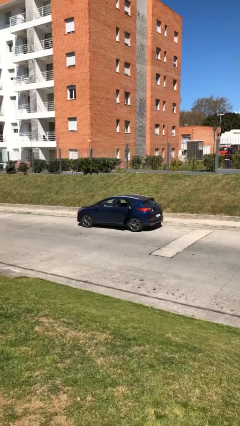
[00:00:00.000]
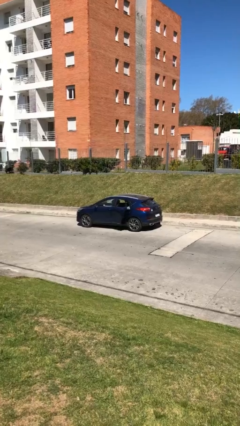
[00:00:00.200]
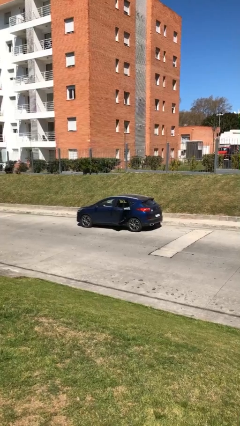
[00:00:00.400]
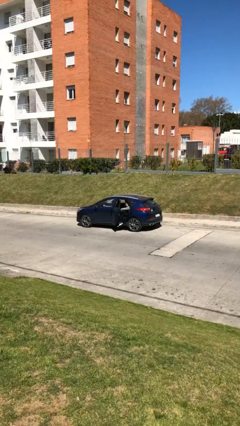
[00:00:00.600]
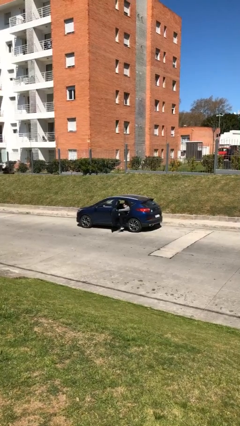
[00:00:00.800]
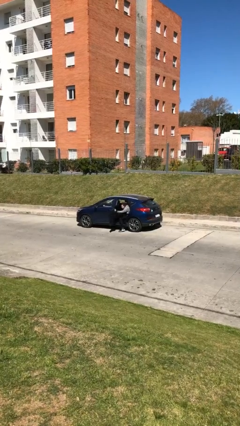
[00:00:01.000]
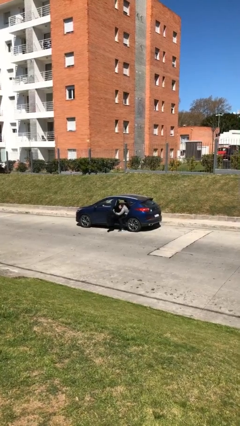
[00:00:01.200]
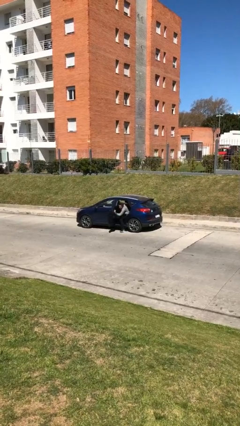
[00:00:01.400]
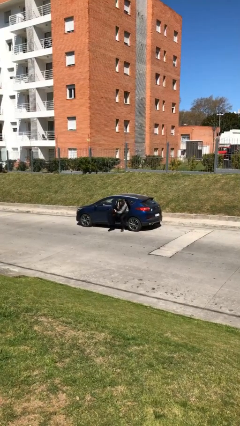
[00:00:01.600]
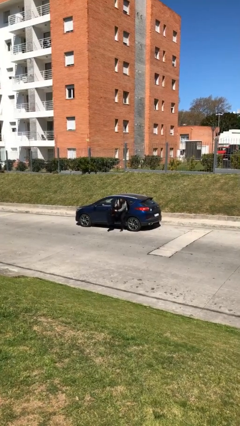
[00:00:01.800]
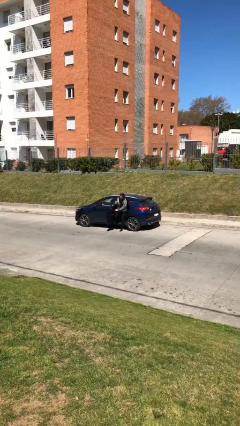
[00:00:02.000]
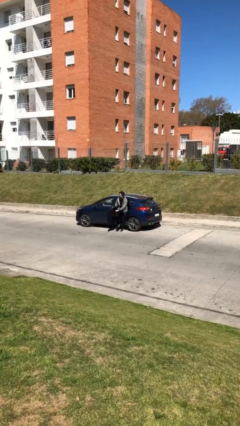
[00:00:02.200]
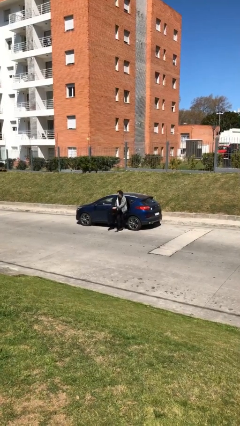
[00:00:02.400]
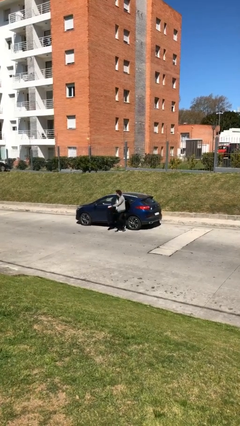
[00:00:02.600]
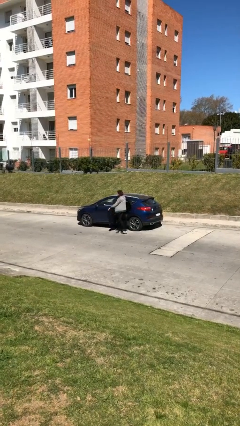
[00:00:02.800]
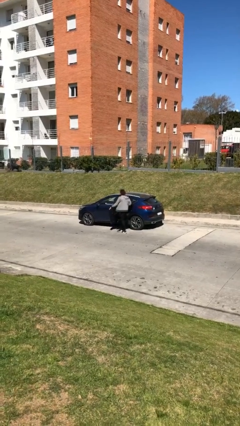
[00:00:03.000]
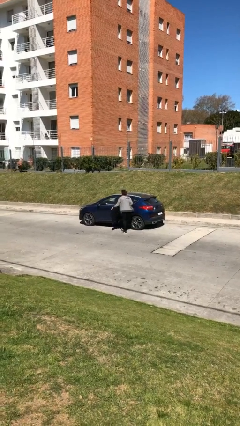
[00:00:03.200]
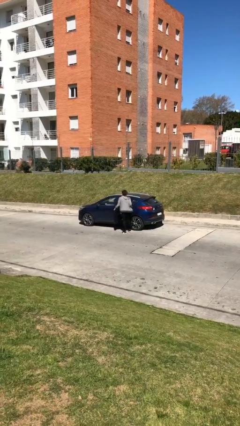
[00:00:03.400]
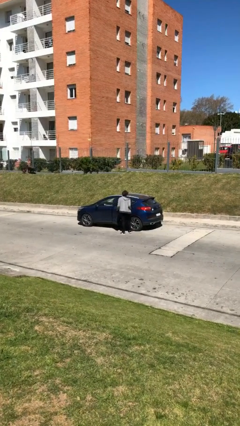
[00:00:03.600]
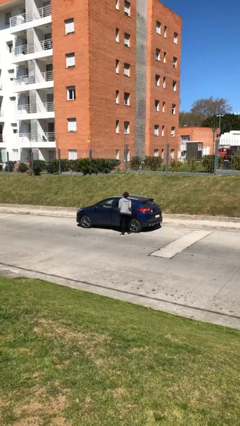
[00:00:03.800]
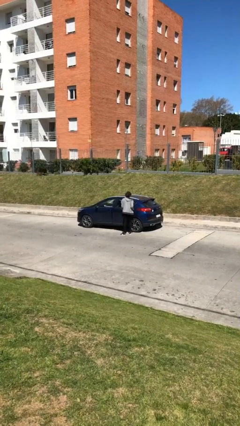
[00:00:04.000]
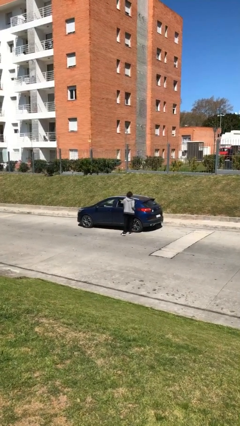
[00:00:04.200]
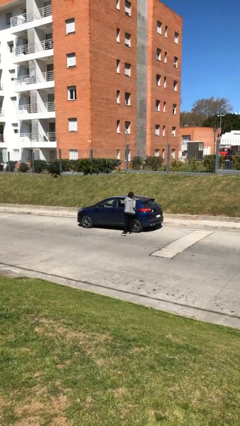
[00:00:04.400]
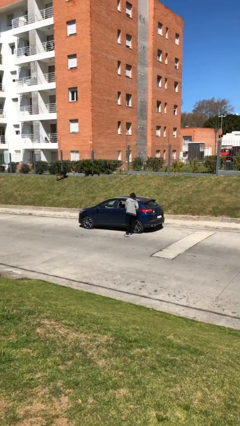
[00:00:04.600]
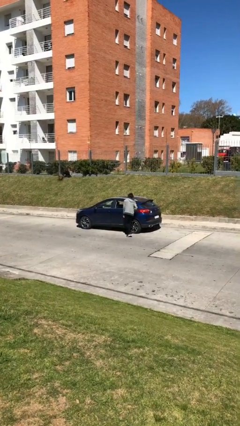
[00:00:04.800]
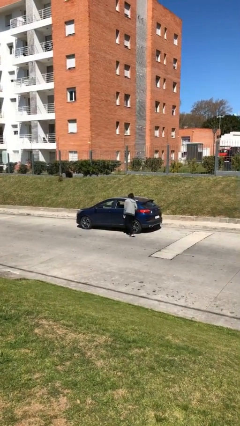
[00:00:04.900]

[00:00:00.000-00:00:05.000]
car drops off person

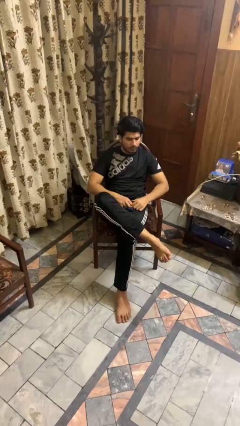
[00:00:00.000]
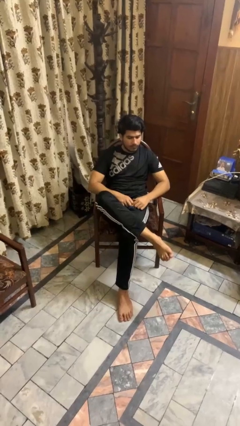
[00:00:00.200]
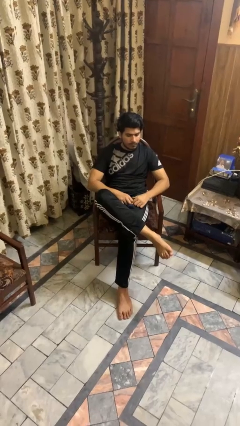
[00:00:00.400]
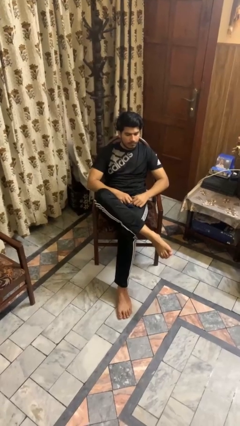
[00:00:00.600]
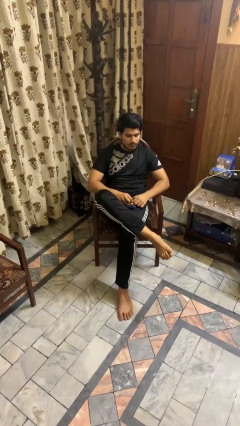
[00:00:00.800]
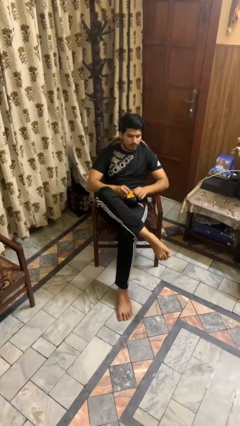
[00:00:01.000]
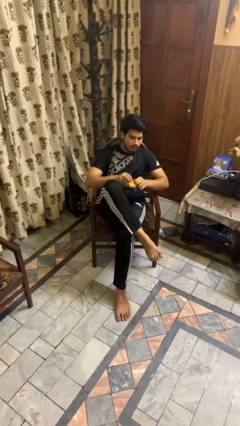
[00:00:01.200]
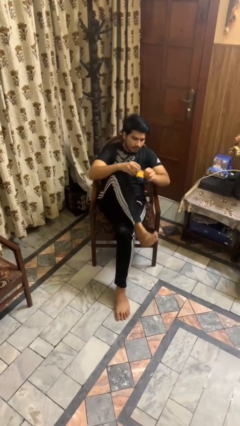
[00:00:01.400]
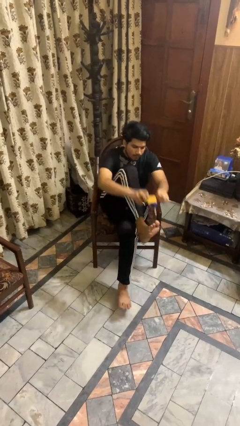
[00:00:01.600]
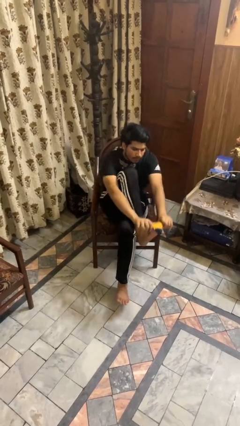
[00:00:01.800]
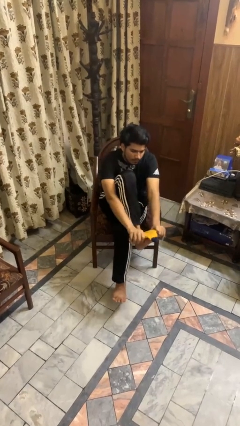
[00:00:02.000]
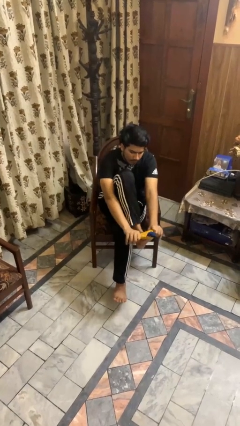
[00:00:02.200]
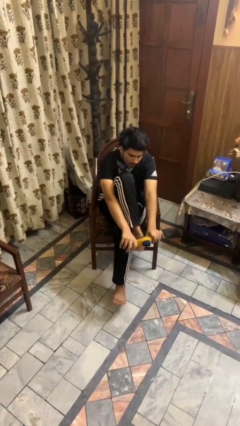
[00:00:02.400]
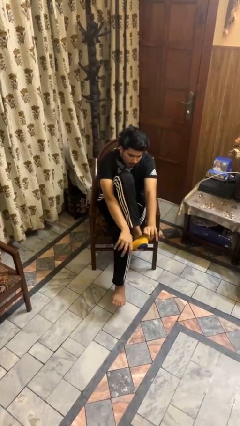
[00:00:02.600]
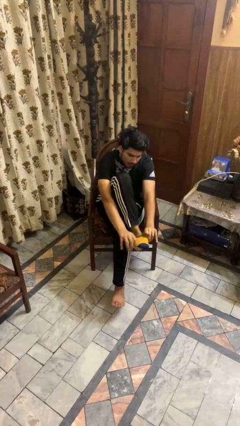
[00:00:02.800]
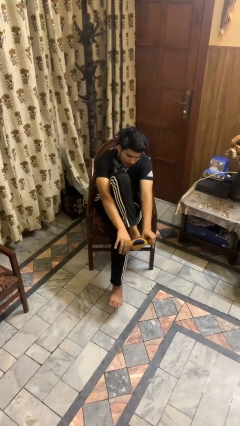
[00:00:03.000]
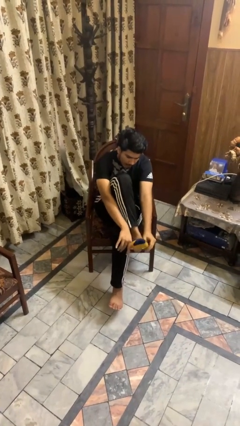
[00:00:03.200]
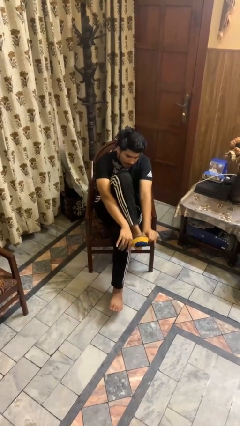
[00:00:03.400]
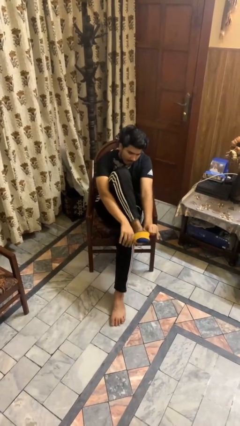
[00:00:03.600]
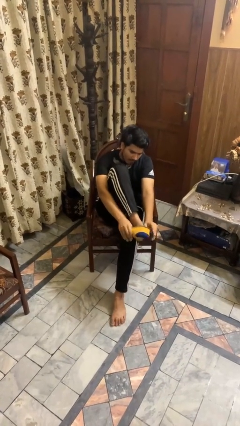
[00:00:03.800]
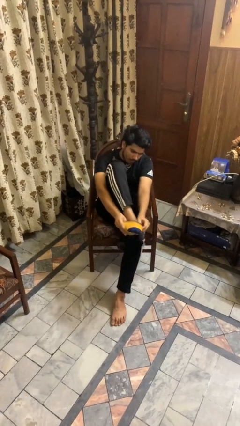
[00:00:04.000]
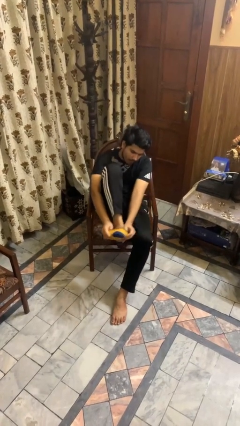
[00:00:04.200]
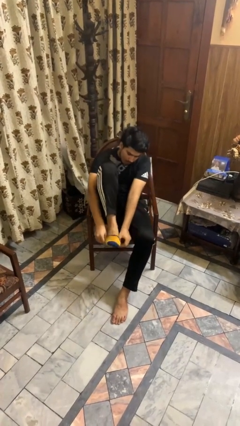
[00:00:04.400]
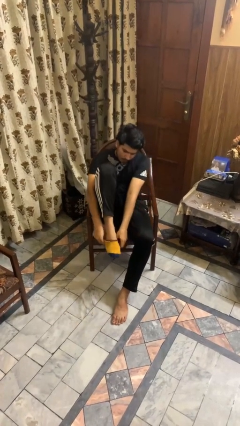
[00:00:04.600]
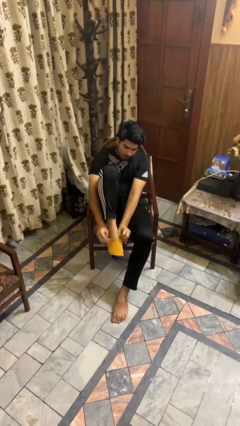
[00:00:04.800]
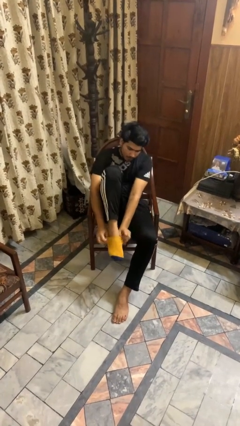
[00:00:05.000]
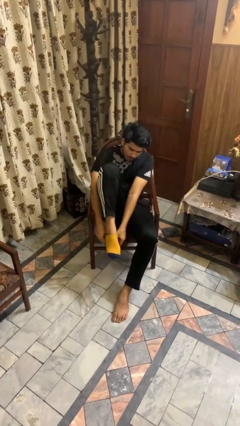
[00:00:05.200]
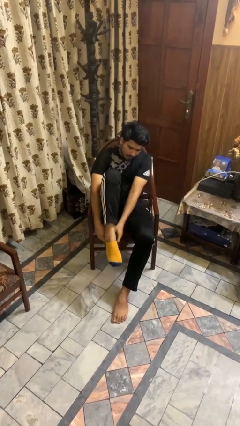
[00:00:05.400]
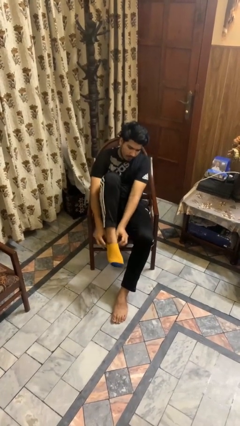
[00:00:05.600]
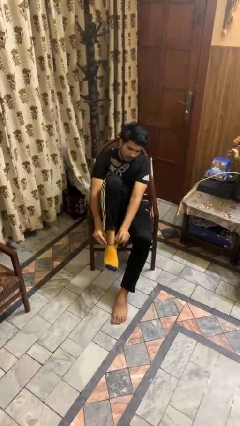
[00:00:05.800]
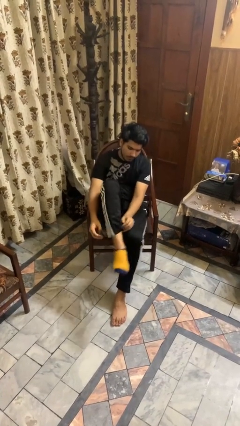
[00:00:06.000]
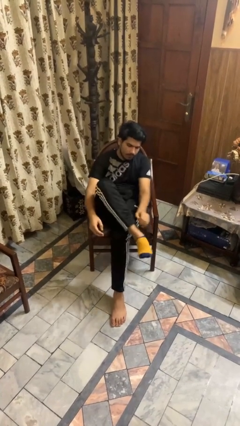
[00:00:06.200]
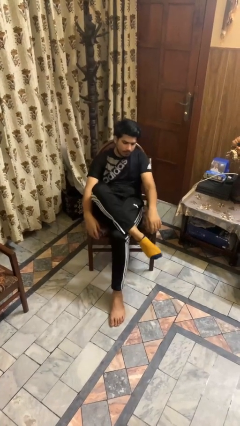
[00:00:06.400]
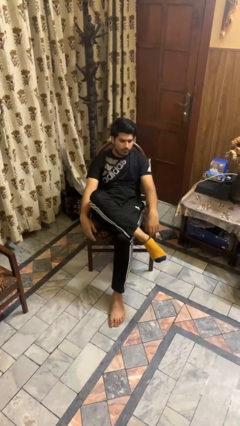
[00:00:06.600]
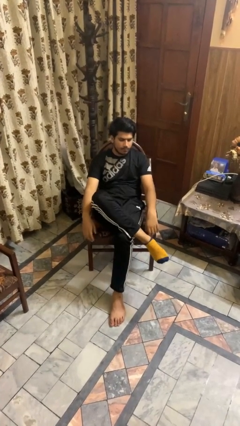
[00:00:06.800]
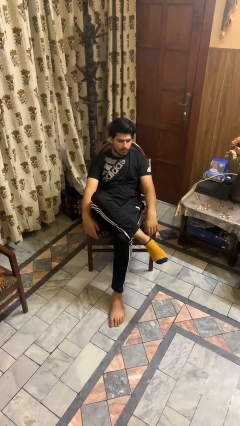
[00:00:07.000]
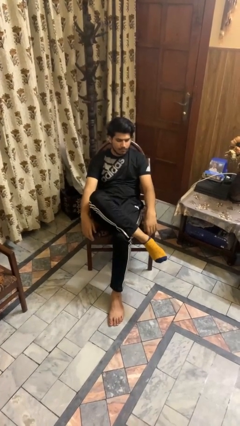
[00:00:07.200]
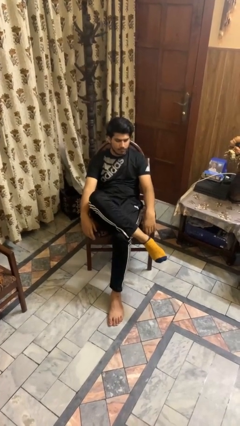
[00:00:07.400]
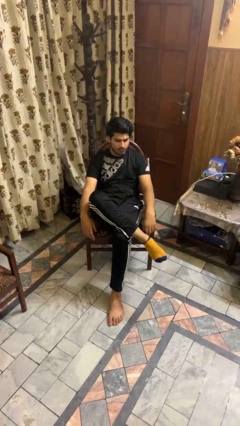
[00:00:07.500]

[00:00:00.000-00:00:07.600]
person puts on socks

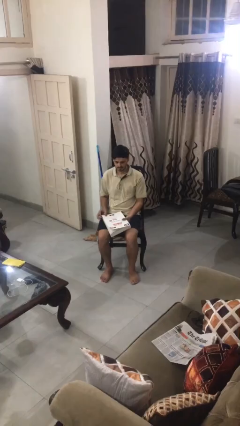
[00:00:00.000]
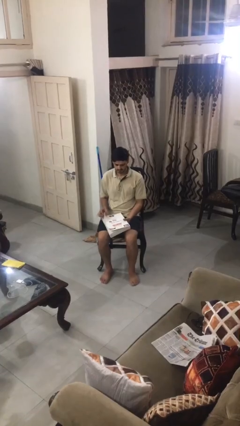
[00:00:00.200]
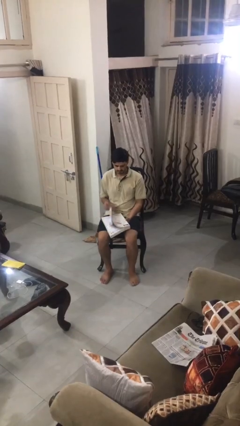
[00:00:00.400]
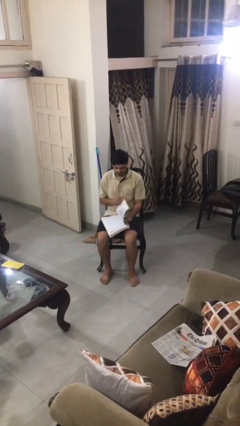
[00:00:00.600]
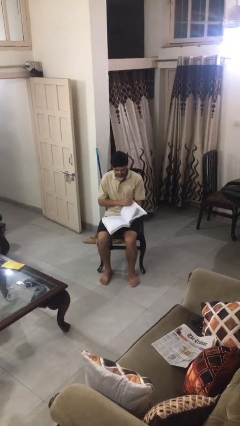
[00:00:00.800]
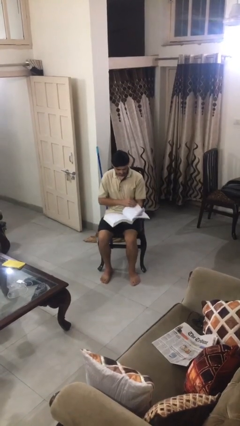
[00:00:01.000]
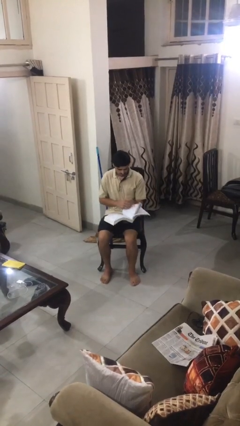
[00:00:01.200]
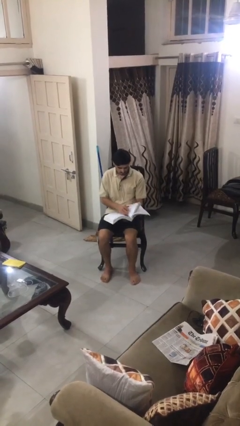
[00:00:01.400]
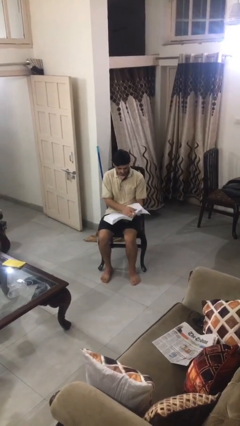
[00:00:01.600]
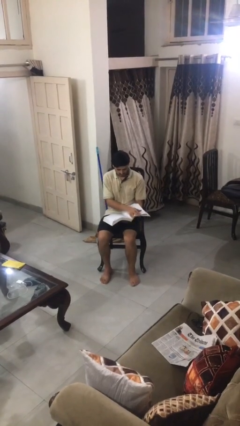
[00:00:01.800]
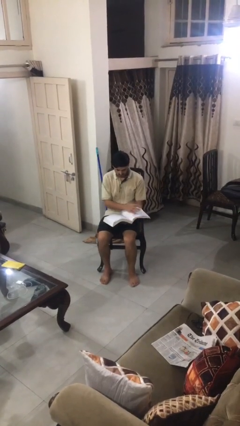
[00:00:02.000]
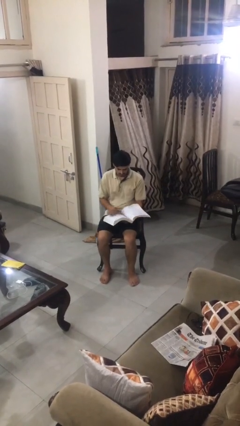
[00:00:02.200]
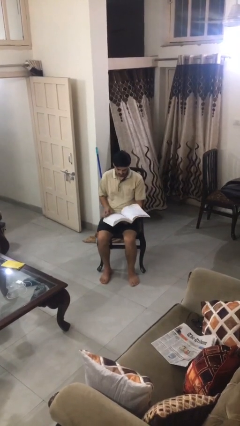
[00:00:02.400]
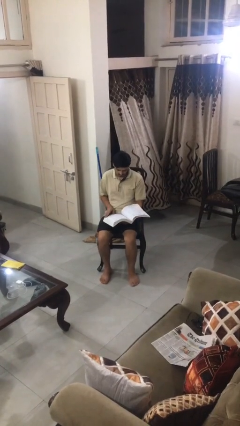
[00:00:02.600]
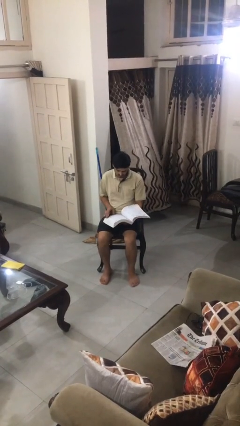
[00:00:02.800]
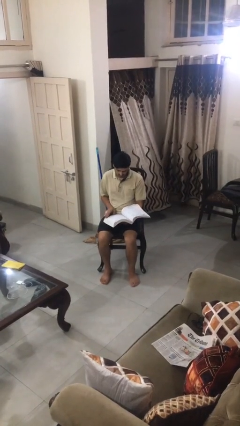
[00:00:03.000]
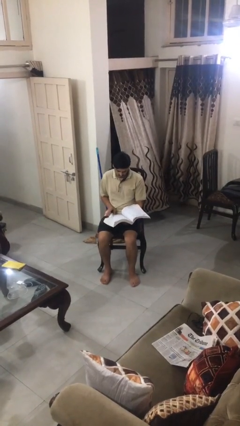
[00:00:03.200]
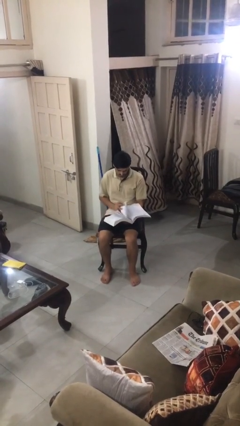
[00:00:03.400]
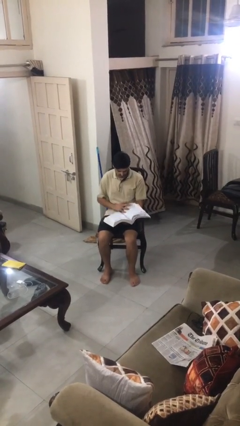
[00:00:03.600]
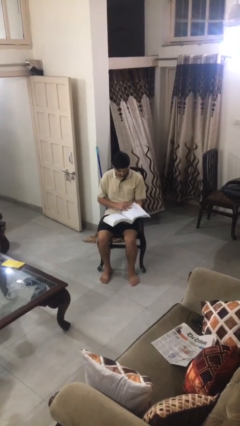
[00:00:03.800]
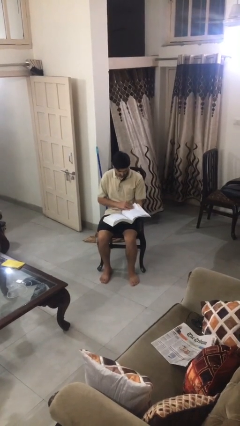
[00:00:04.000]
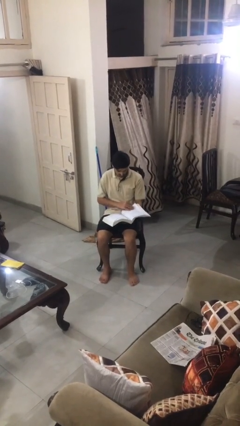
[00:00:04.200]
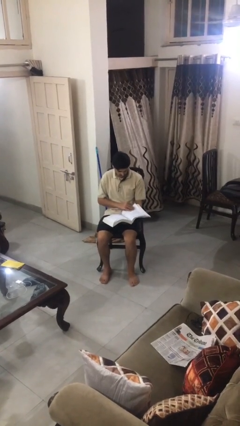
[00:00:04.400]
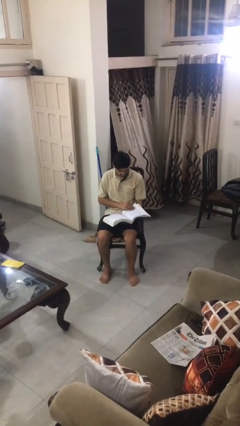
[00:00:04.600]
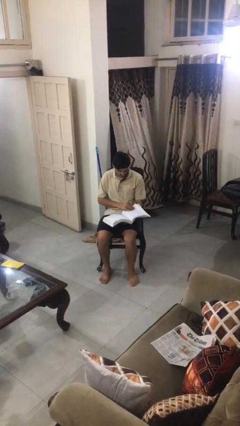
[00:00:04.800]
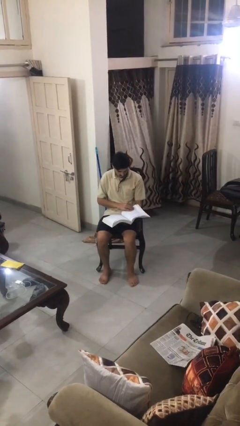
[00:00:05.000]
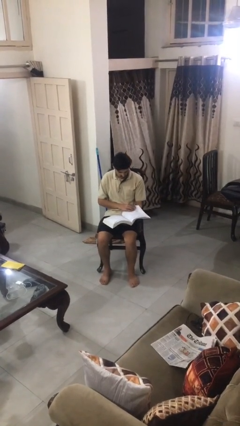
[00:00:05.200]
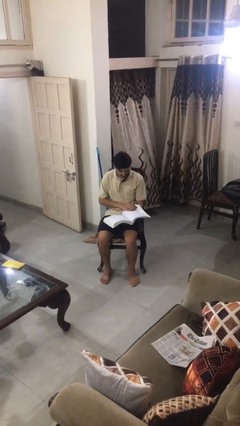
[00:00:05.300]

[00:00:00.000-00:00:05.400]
person reads book

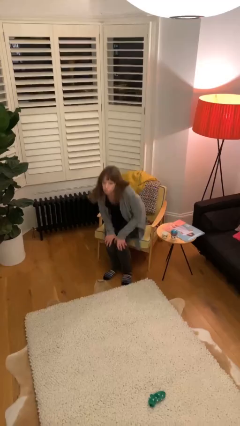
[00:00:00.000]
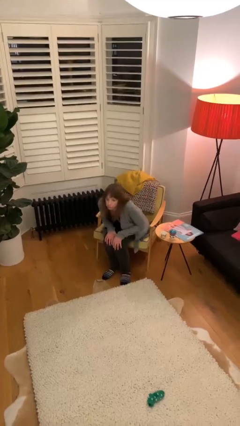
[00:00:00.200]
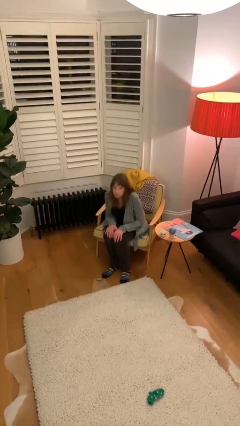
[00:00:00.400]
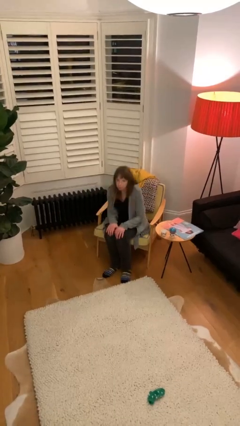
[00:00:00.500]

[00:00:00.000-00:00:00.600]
person sits down
